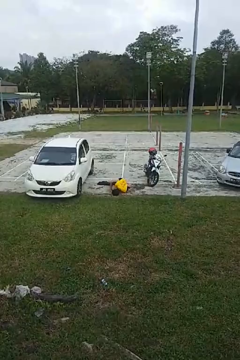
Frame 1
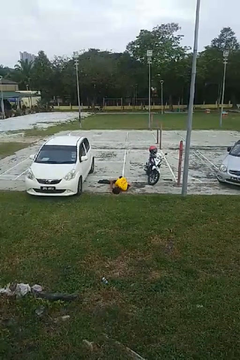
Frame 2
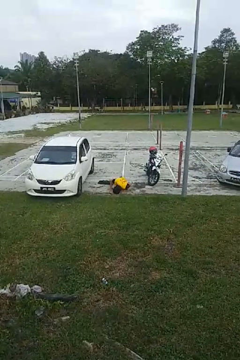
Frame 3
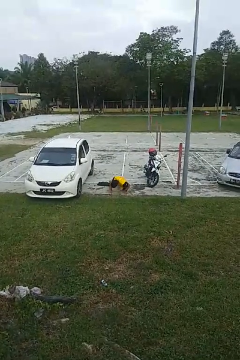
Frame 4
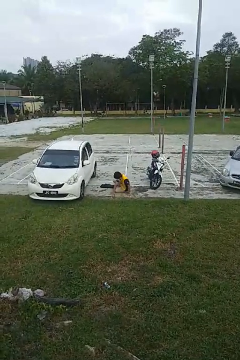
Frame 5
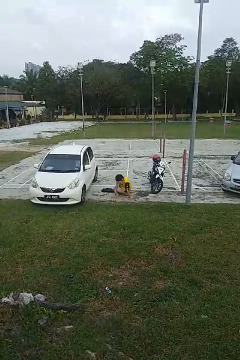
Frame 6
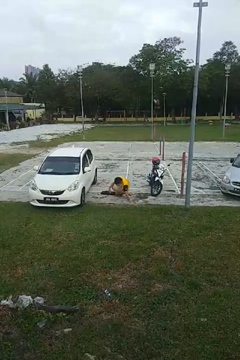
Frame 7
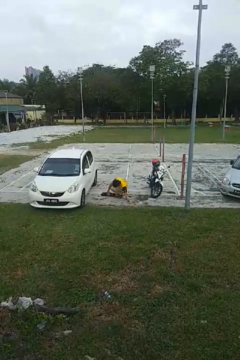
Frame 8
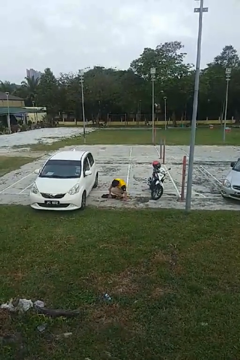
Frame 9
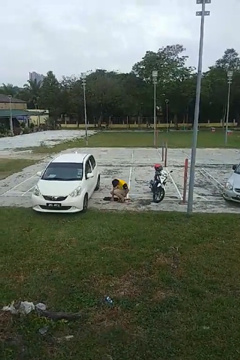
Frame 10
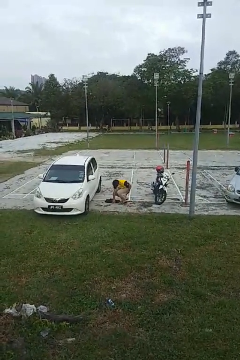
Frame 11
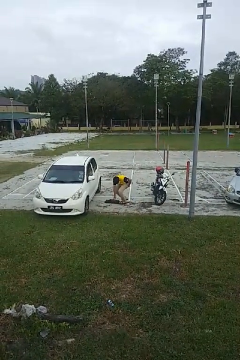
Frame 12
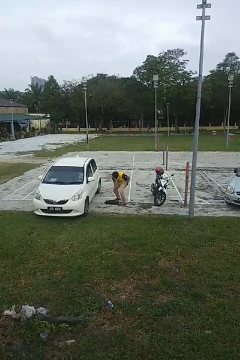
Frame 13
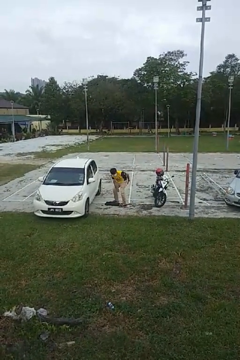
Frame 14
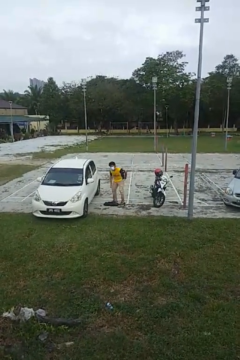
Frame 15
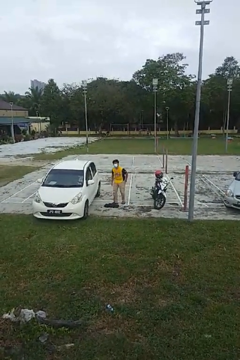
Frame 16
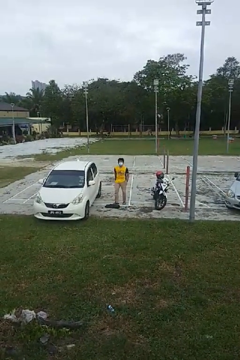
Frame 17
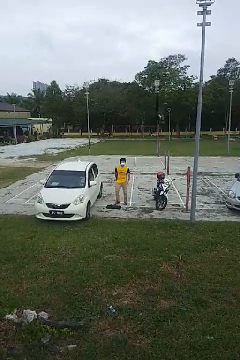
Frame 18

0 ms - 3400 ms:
person stands up from floor

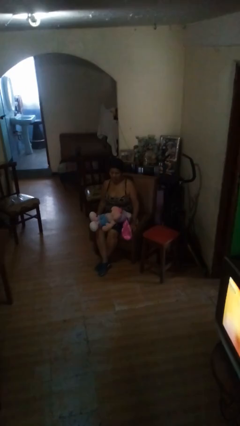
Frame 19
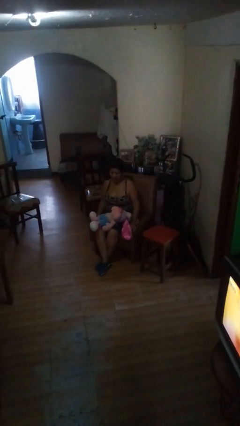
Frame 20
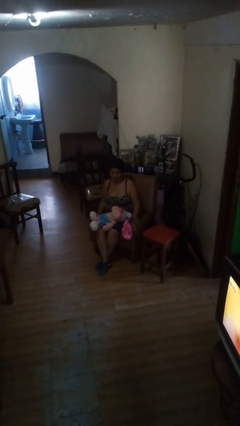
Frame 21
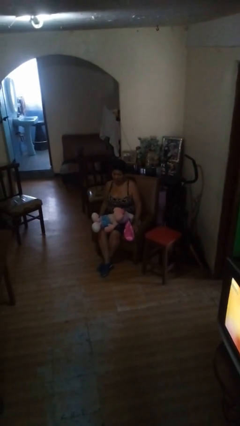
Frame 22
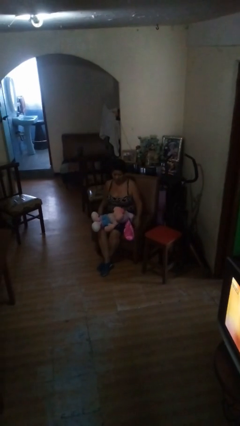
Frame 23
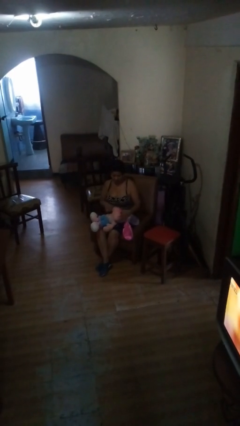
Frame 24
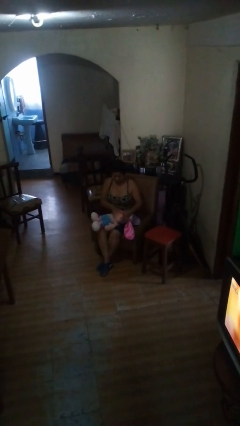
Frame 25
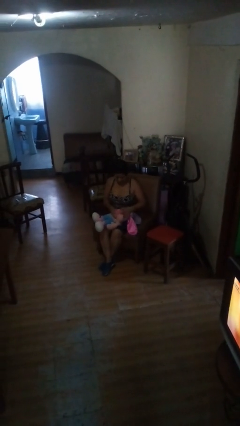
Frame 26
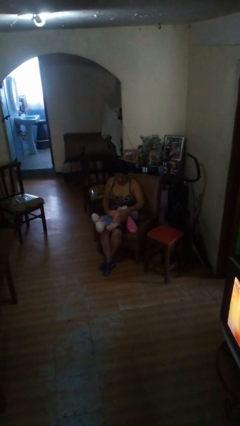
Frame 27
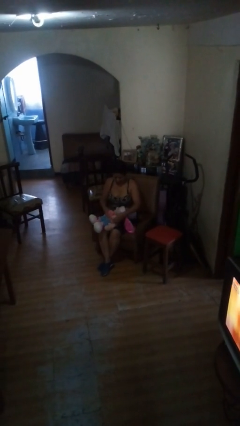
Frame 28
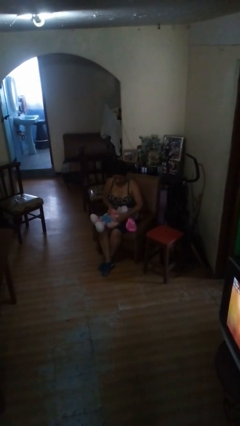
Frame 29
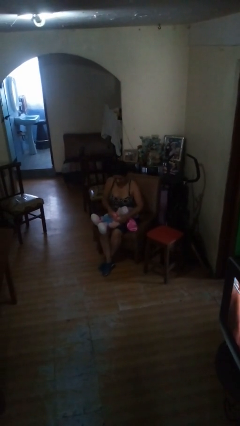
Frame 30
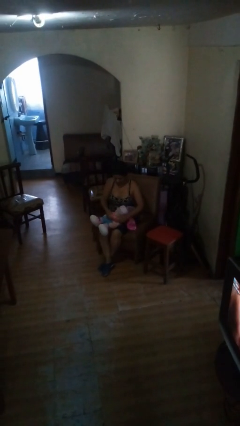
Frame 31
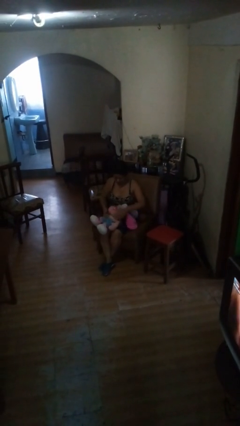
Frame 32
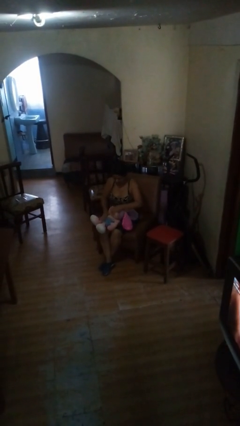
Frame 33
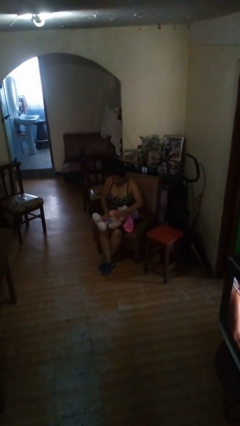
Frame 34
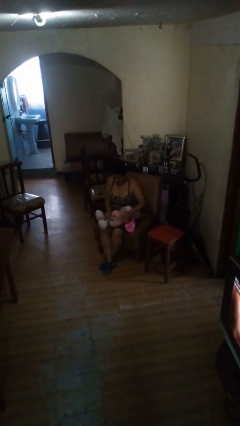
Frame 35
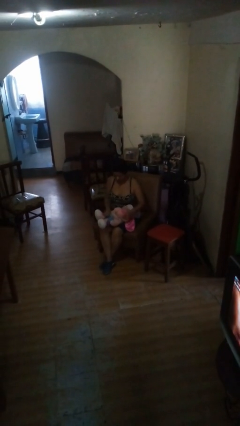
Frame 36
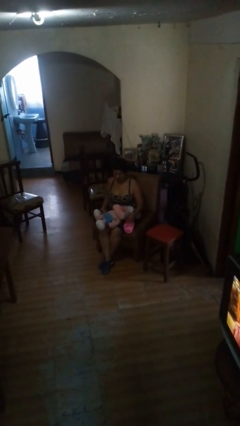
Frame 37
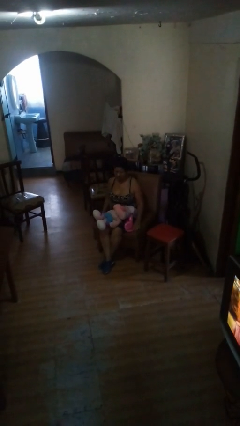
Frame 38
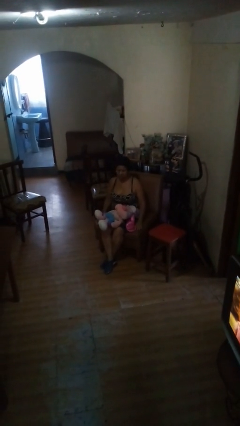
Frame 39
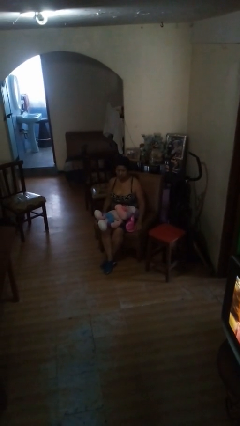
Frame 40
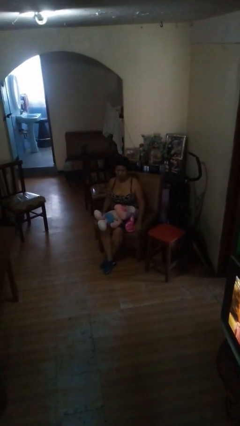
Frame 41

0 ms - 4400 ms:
person squeezes object

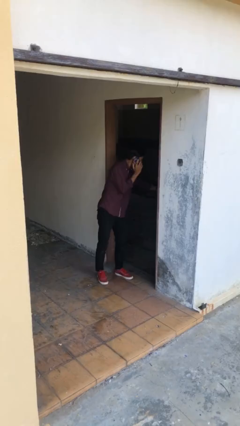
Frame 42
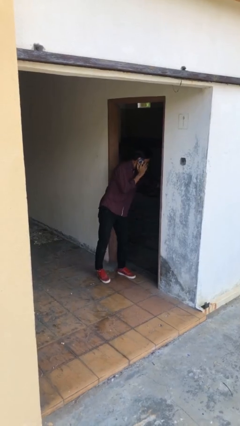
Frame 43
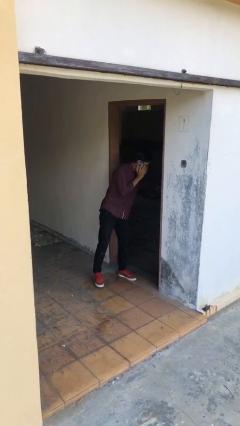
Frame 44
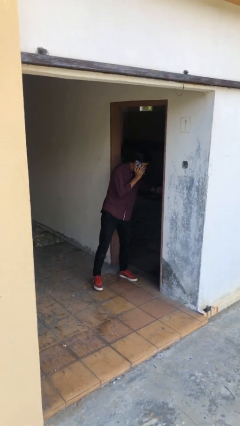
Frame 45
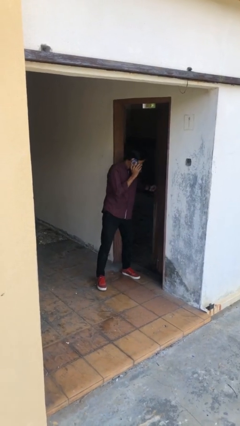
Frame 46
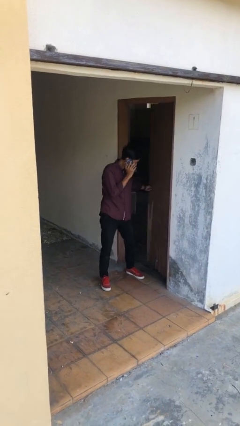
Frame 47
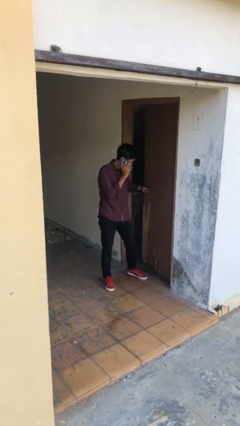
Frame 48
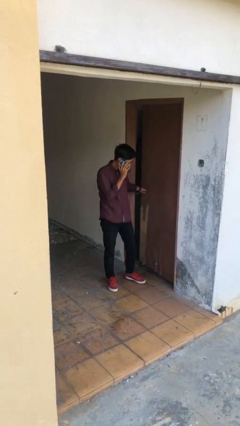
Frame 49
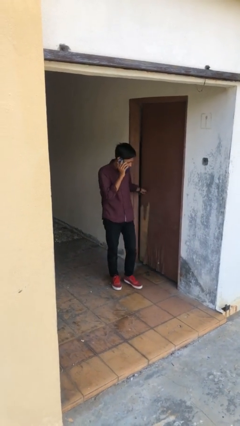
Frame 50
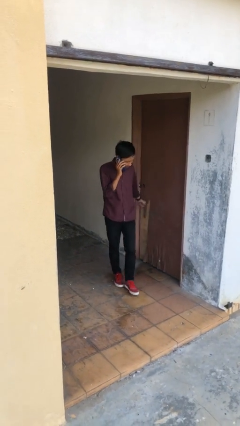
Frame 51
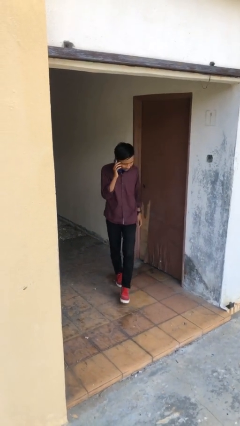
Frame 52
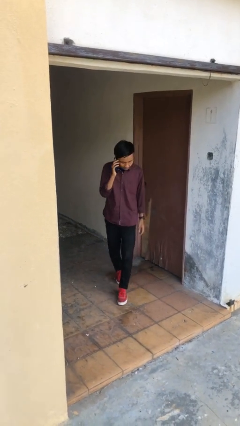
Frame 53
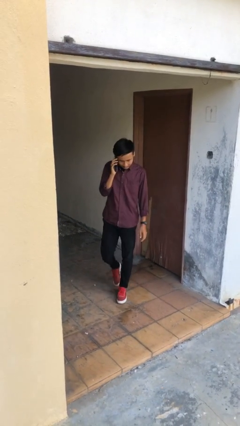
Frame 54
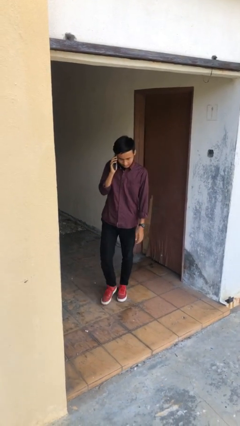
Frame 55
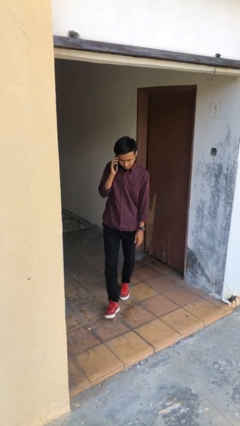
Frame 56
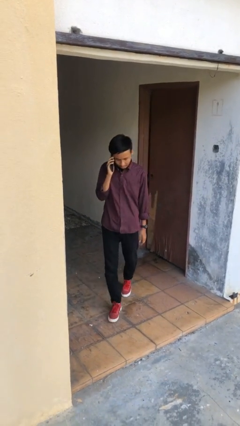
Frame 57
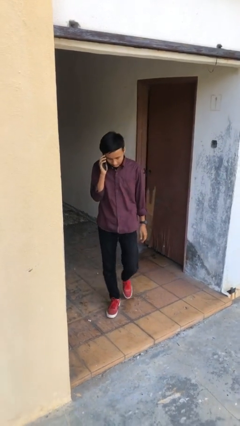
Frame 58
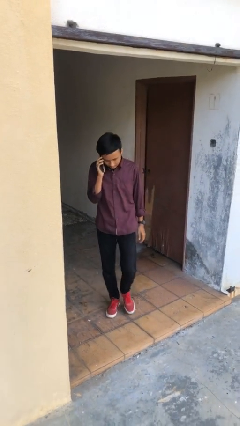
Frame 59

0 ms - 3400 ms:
person closes facility door

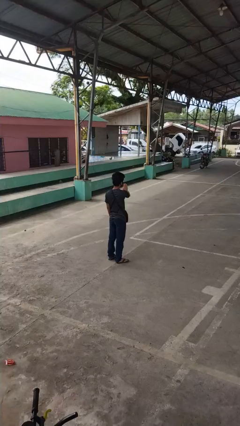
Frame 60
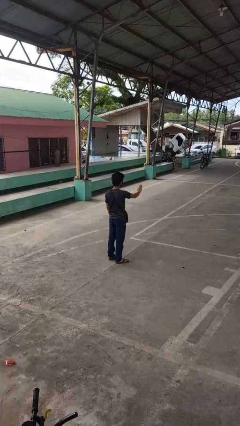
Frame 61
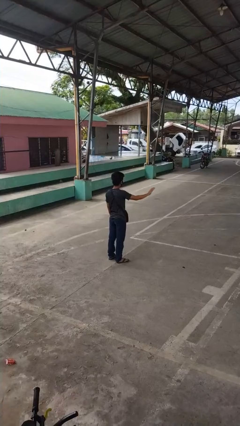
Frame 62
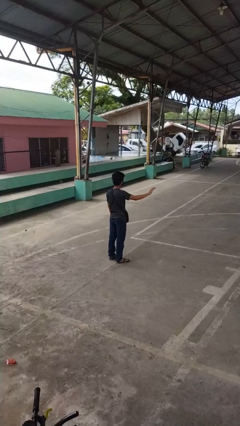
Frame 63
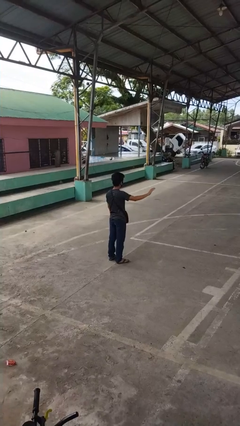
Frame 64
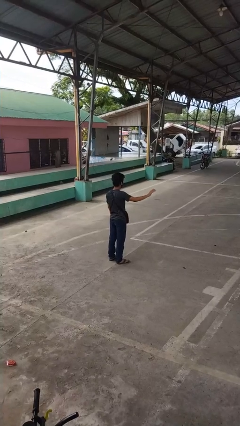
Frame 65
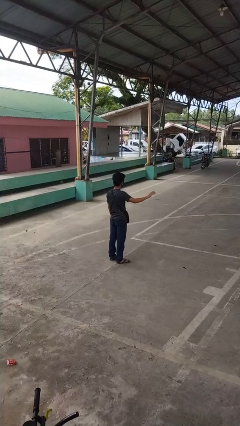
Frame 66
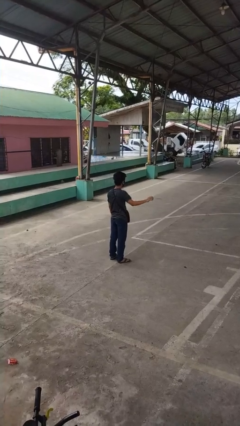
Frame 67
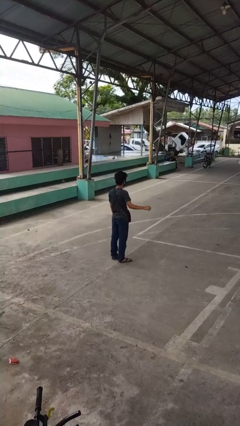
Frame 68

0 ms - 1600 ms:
person gestures swipe right

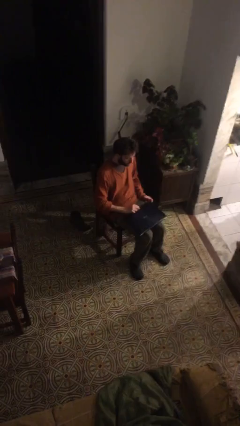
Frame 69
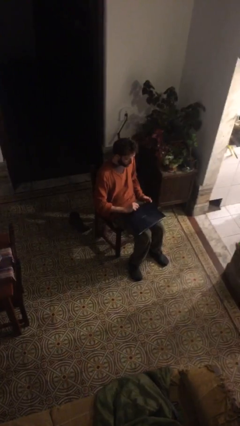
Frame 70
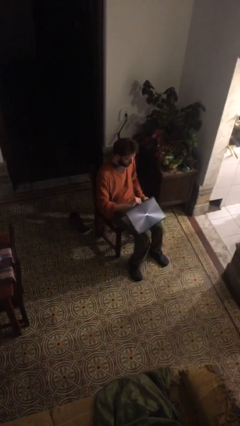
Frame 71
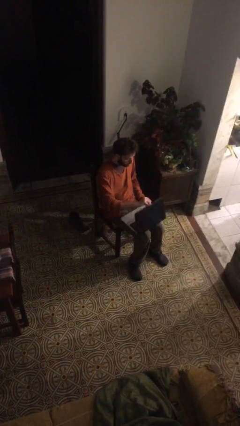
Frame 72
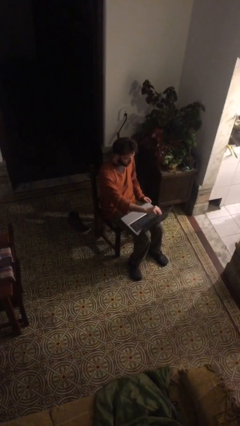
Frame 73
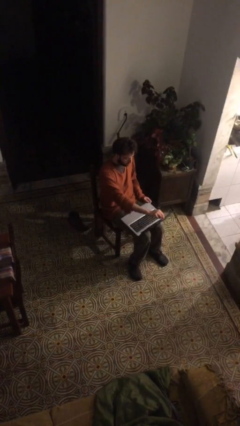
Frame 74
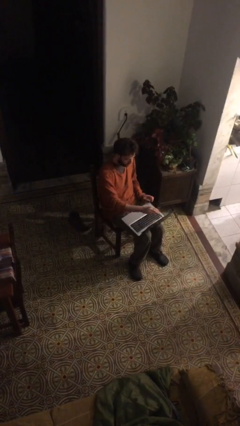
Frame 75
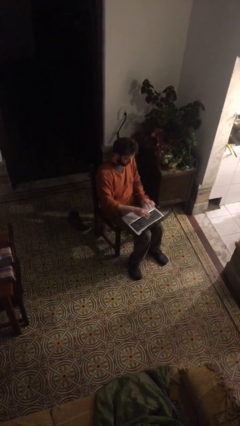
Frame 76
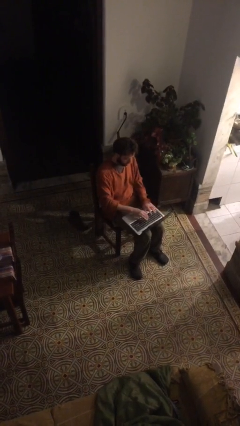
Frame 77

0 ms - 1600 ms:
person opens laptop

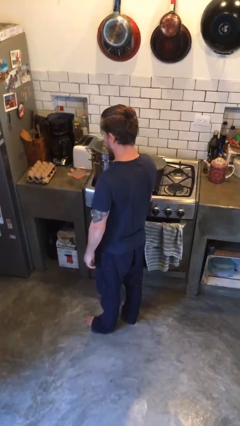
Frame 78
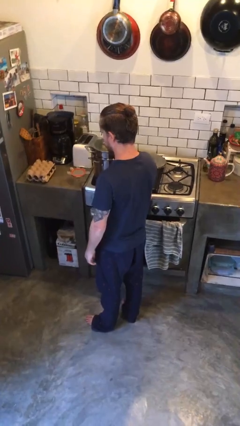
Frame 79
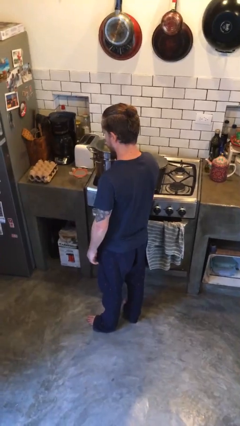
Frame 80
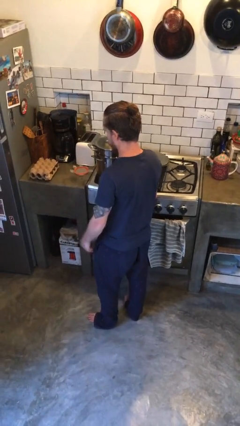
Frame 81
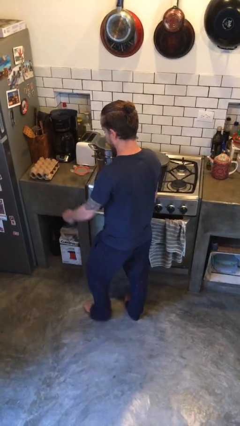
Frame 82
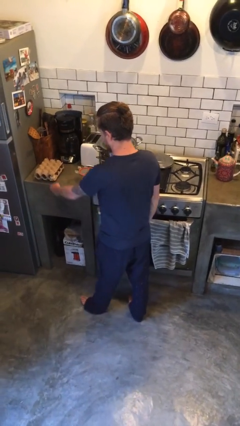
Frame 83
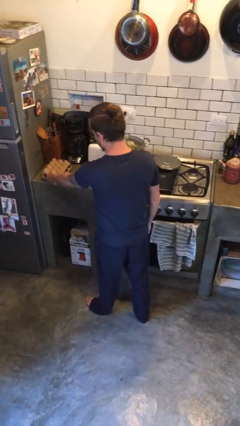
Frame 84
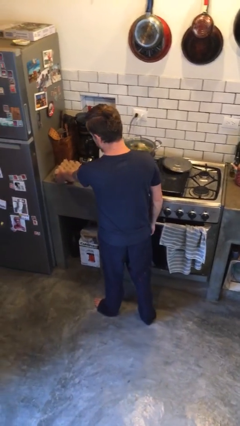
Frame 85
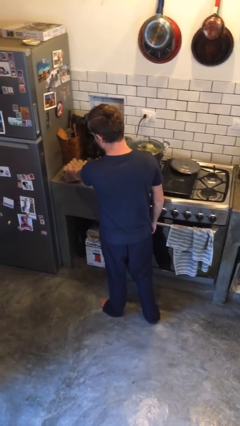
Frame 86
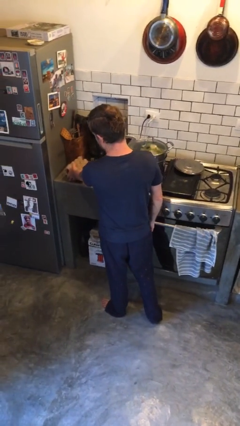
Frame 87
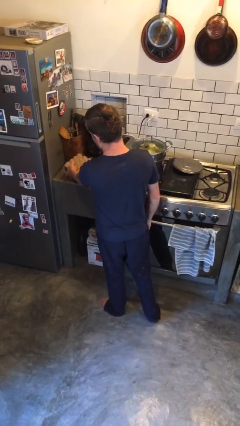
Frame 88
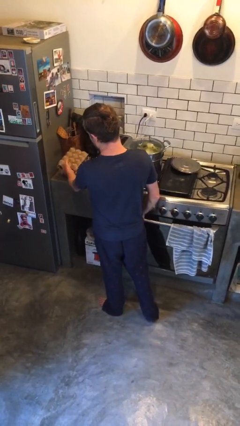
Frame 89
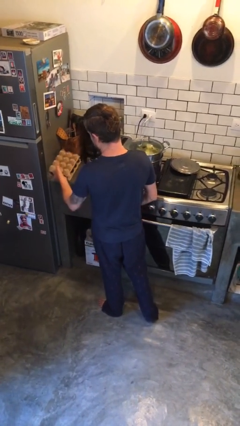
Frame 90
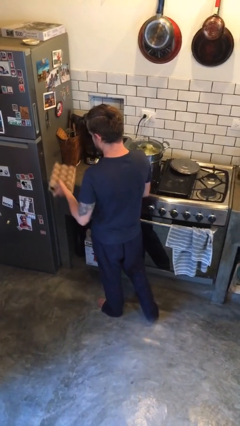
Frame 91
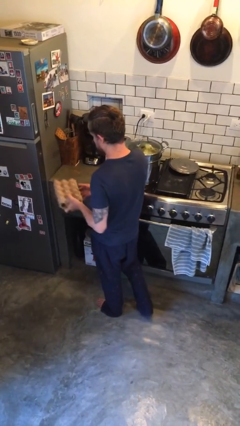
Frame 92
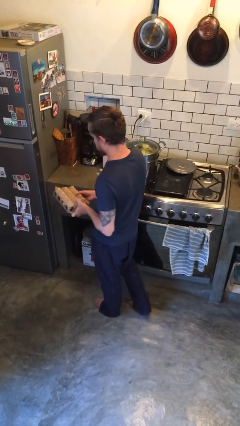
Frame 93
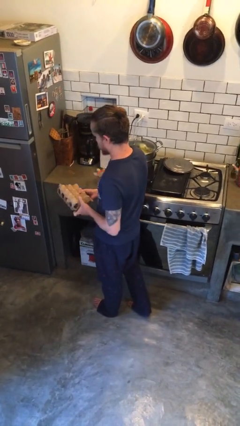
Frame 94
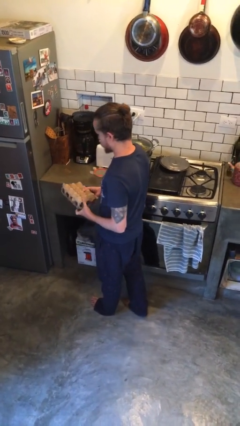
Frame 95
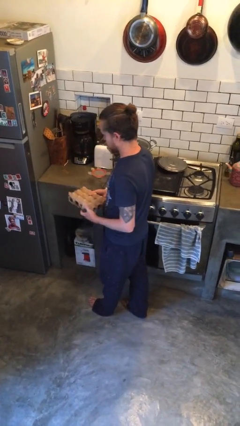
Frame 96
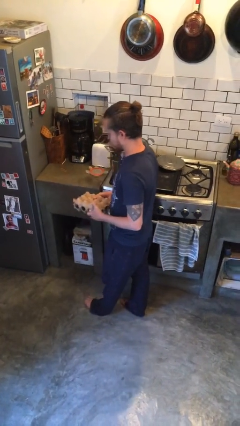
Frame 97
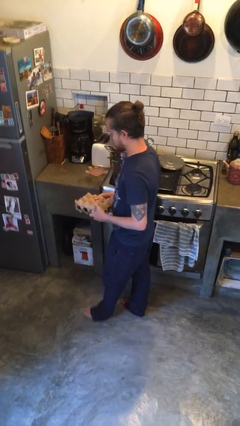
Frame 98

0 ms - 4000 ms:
person picks up object from countertop
